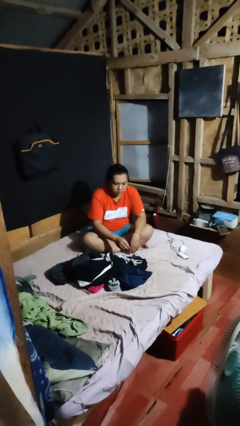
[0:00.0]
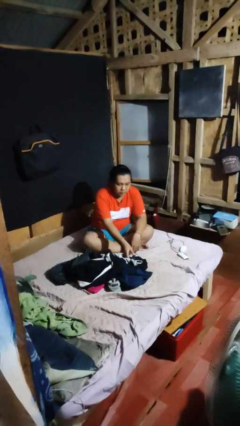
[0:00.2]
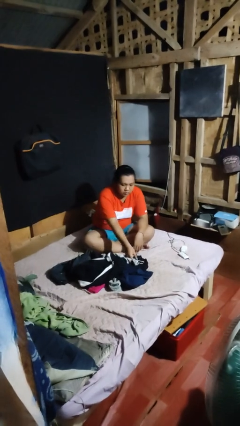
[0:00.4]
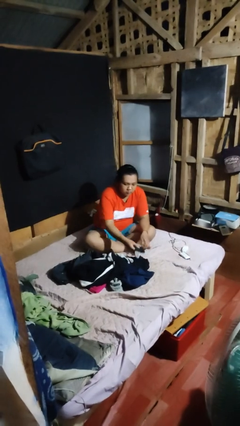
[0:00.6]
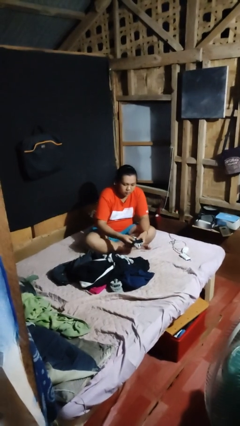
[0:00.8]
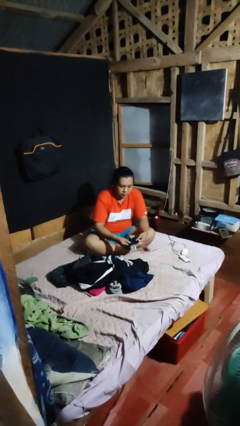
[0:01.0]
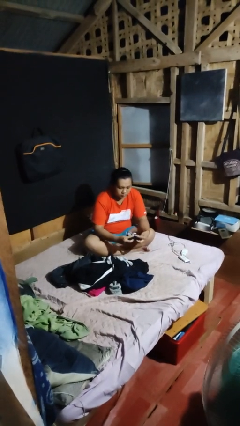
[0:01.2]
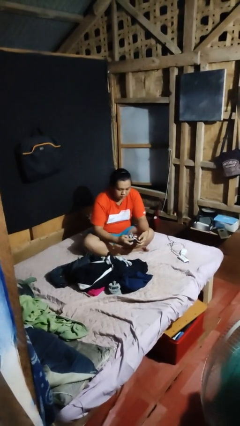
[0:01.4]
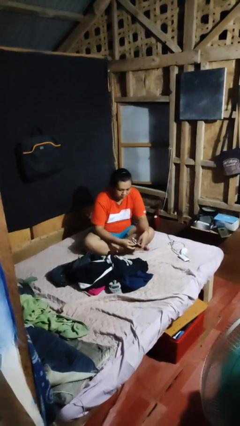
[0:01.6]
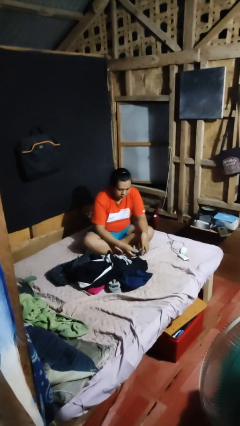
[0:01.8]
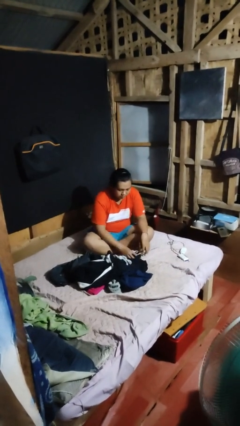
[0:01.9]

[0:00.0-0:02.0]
person folds socks

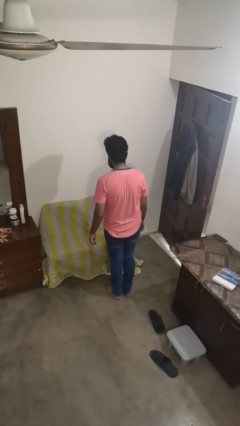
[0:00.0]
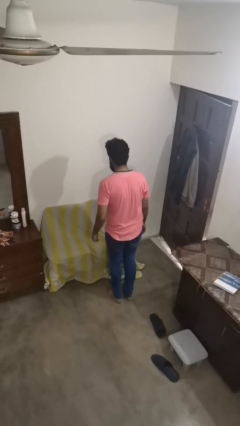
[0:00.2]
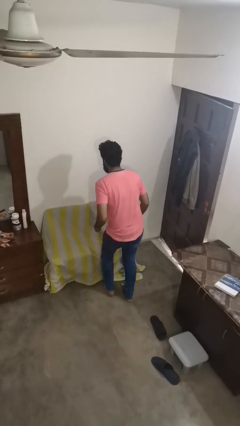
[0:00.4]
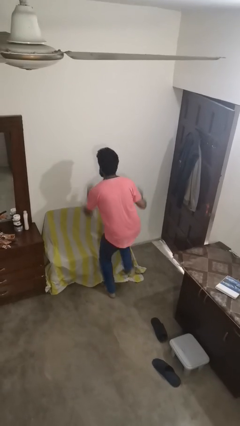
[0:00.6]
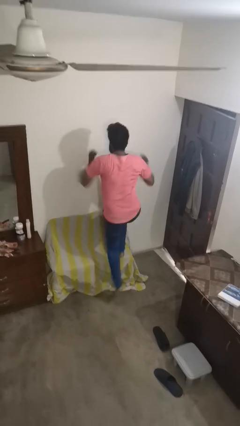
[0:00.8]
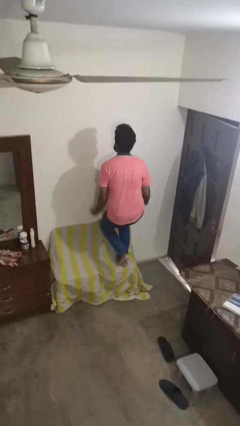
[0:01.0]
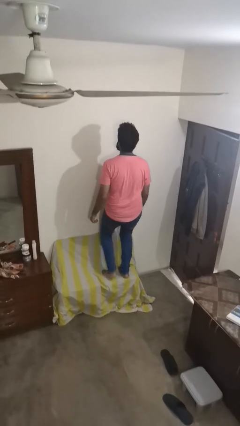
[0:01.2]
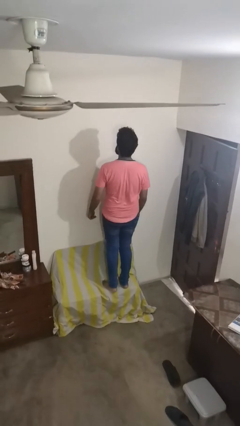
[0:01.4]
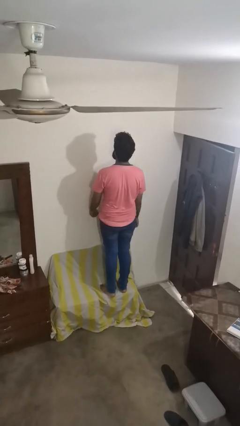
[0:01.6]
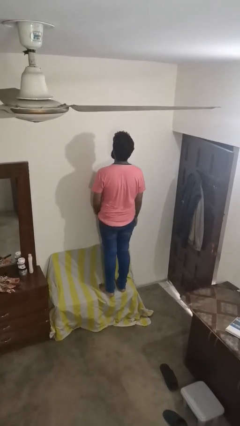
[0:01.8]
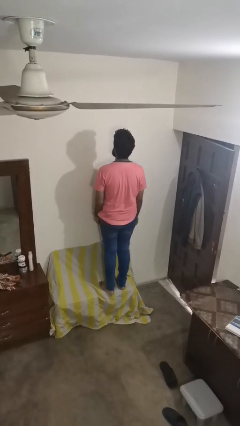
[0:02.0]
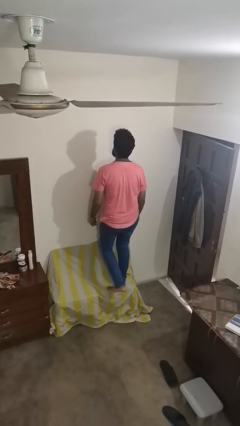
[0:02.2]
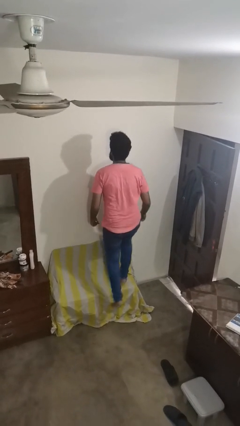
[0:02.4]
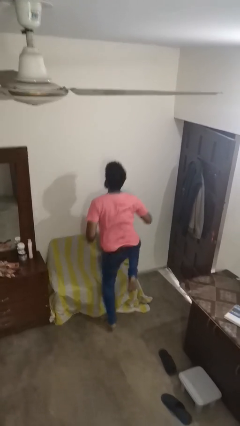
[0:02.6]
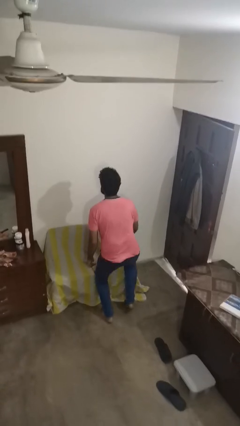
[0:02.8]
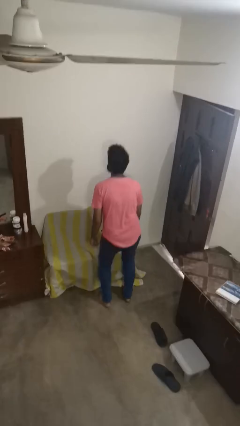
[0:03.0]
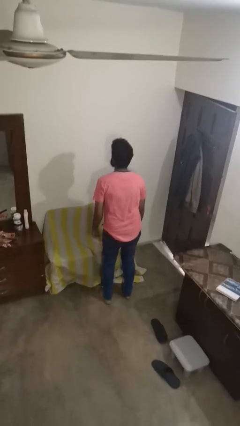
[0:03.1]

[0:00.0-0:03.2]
person jumps on couch

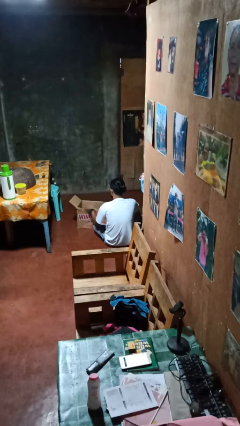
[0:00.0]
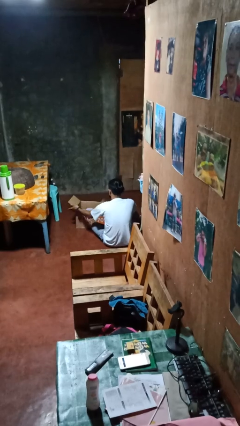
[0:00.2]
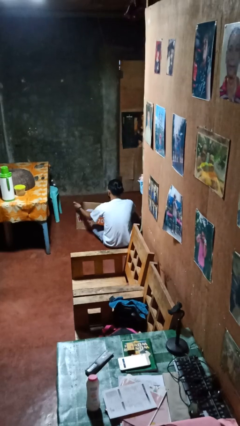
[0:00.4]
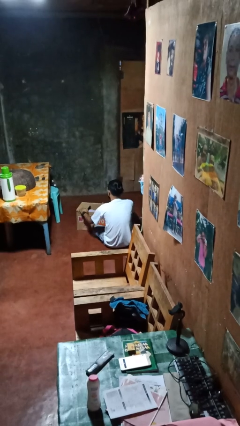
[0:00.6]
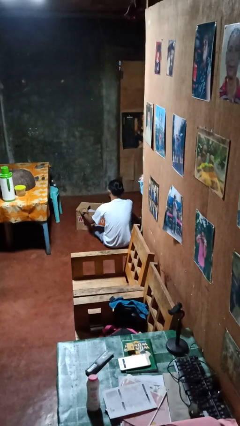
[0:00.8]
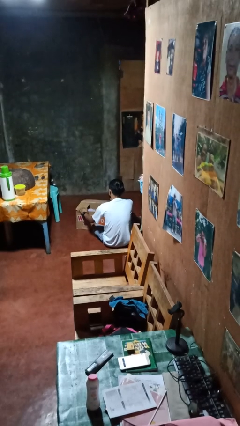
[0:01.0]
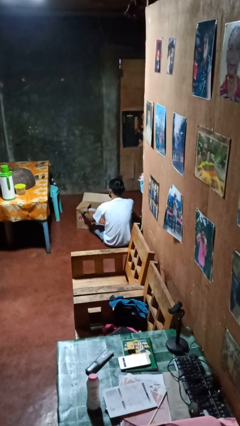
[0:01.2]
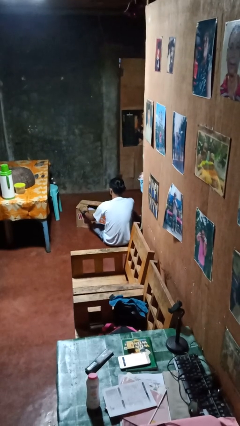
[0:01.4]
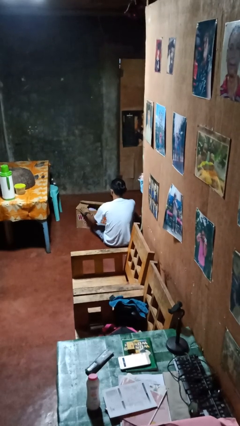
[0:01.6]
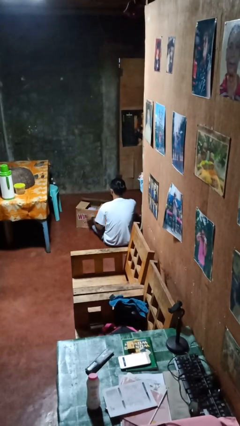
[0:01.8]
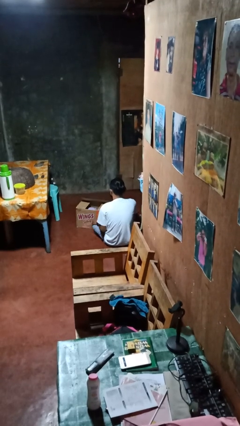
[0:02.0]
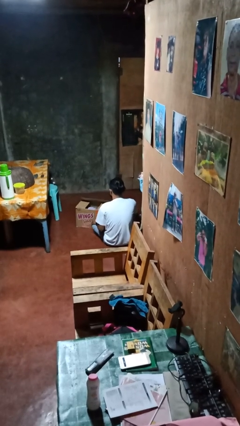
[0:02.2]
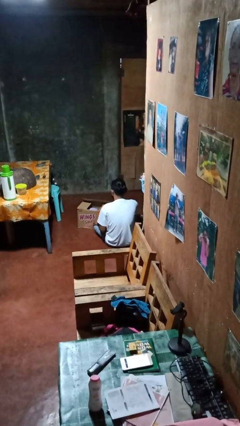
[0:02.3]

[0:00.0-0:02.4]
person closes box

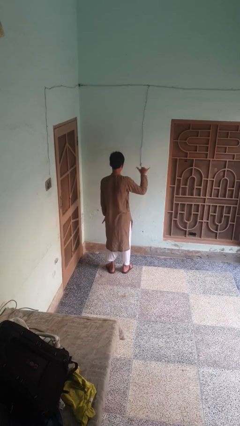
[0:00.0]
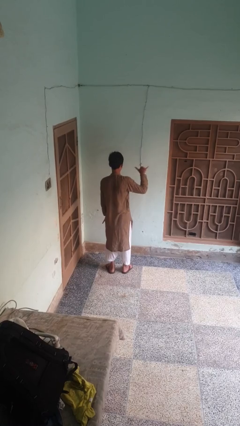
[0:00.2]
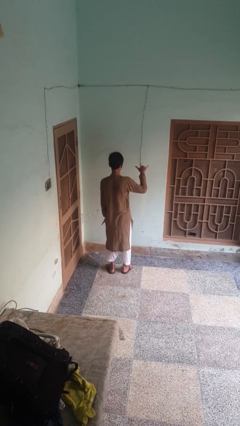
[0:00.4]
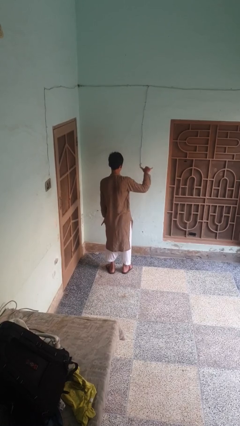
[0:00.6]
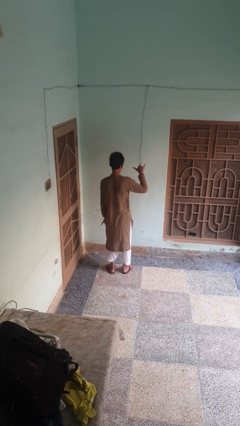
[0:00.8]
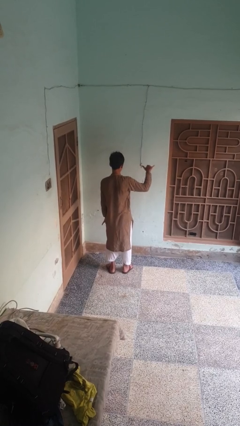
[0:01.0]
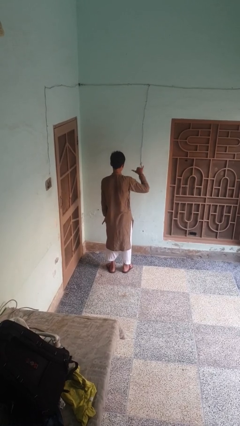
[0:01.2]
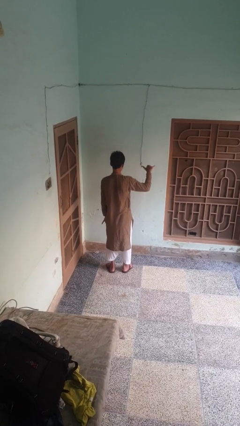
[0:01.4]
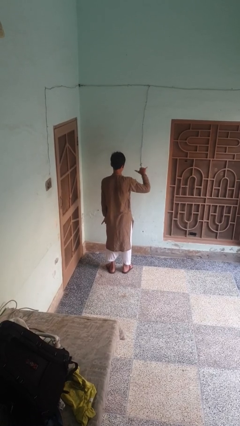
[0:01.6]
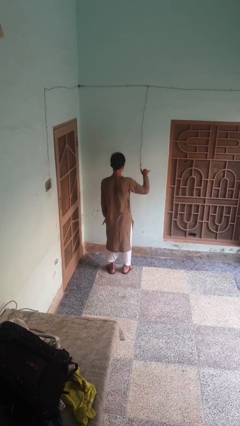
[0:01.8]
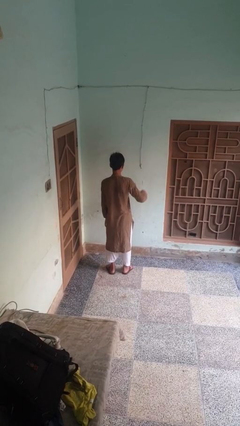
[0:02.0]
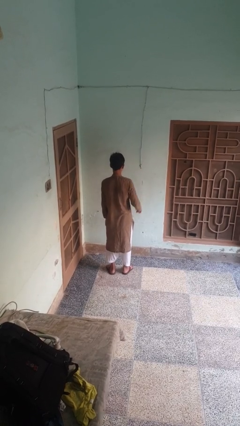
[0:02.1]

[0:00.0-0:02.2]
person gestures hang loose

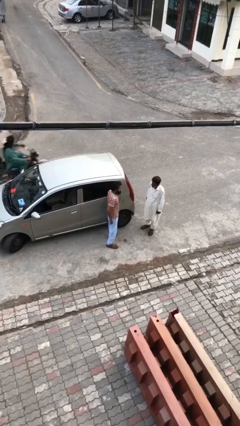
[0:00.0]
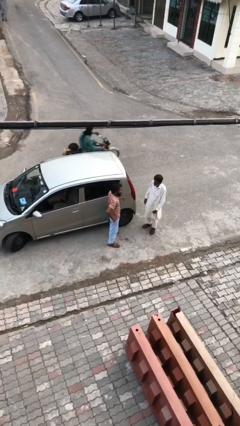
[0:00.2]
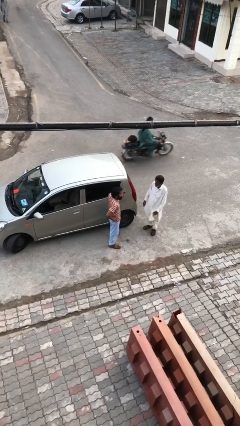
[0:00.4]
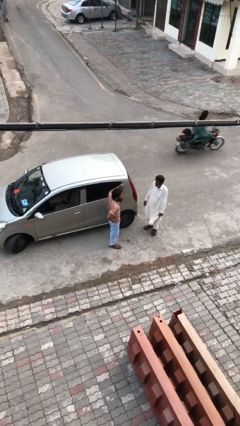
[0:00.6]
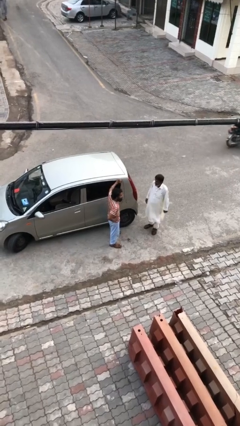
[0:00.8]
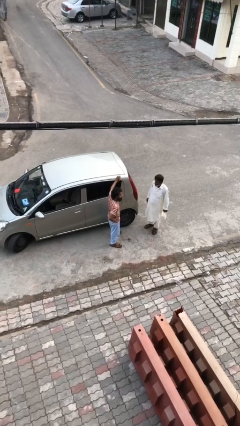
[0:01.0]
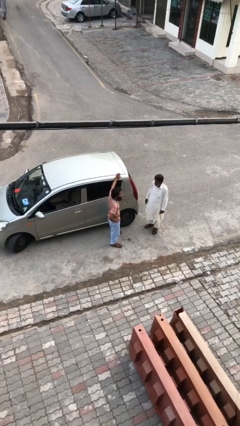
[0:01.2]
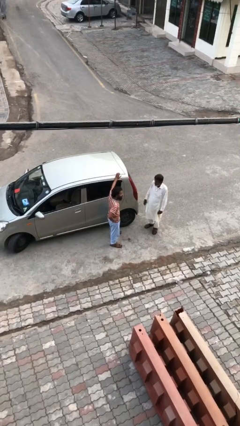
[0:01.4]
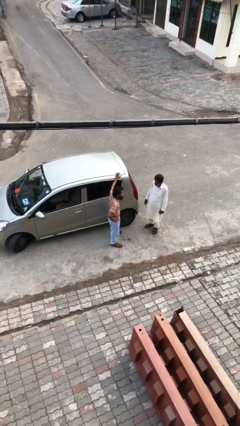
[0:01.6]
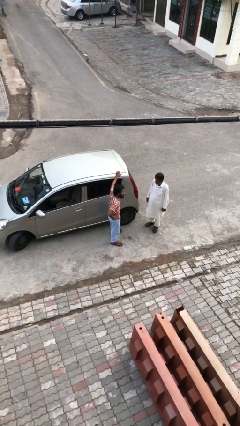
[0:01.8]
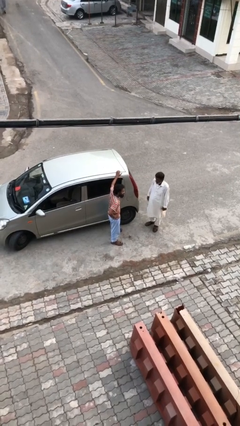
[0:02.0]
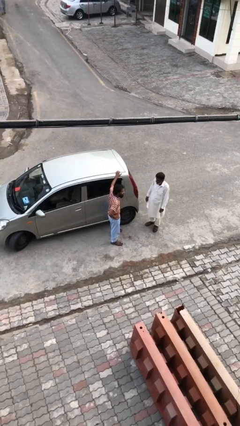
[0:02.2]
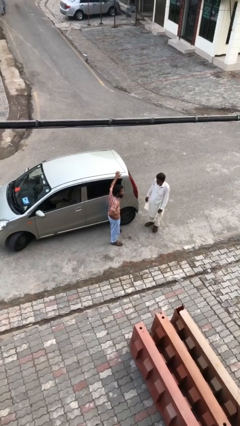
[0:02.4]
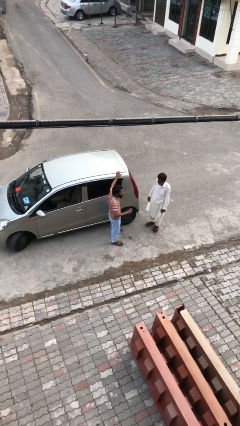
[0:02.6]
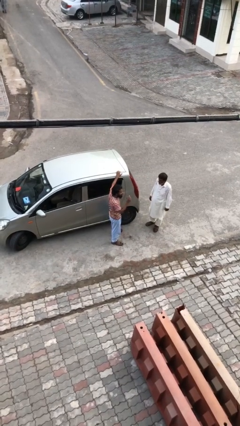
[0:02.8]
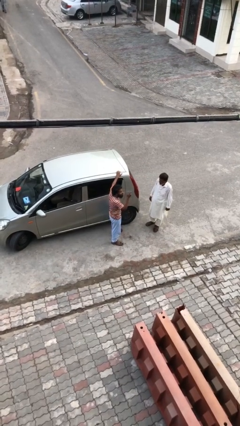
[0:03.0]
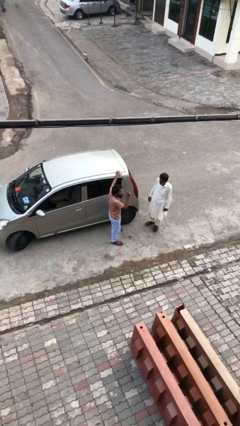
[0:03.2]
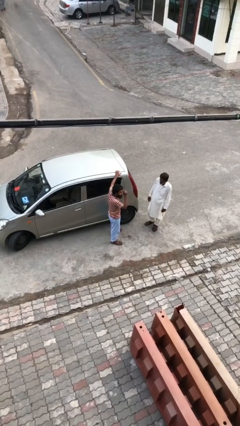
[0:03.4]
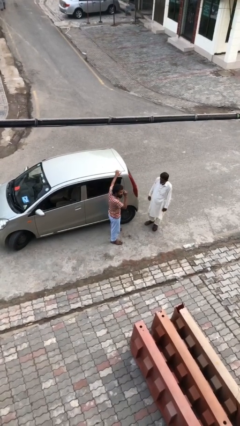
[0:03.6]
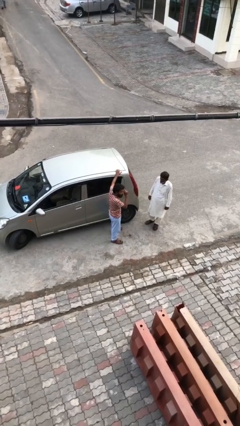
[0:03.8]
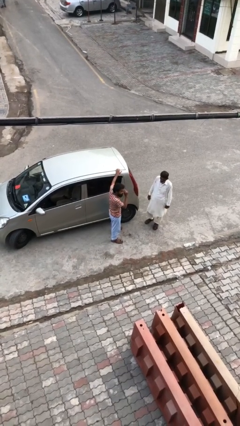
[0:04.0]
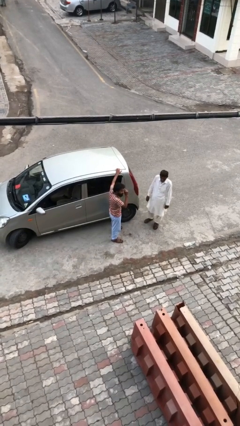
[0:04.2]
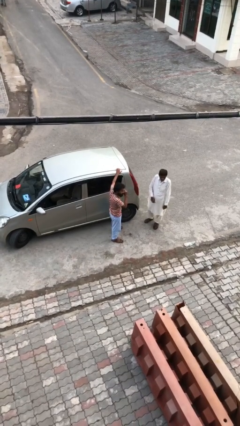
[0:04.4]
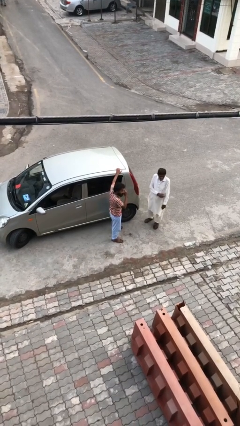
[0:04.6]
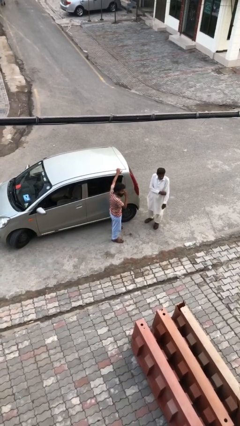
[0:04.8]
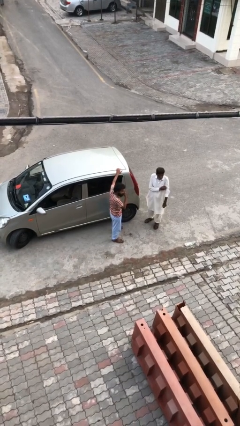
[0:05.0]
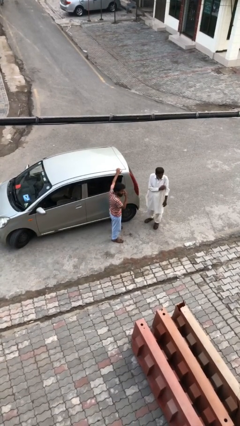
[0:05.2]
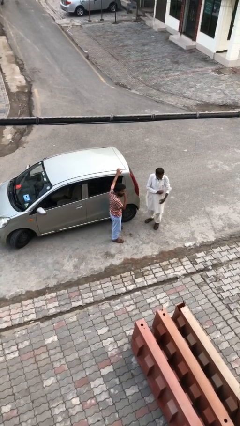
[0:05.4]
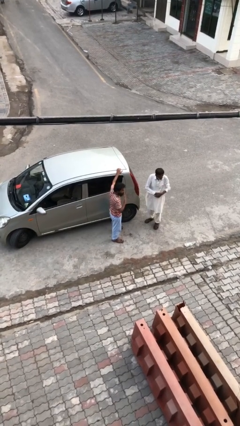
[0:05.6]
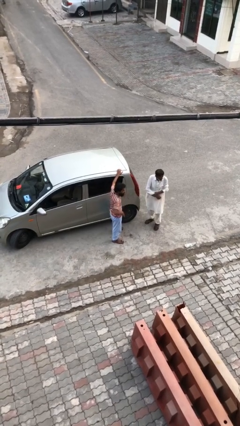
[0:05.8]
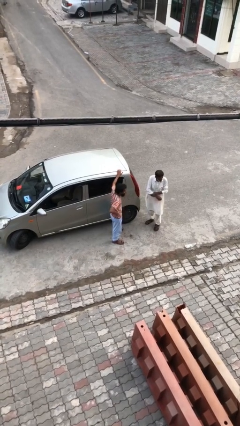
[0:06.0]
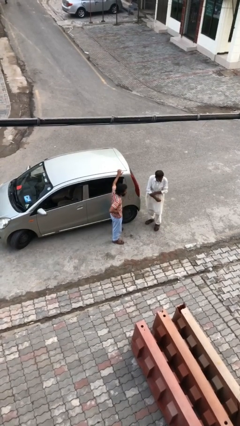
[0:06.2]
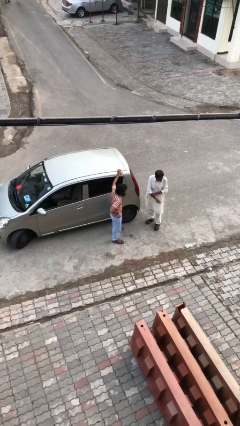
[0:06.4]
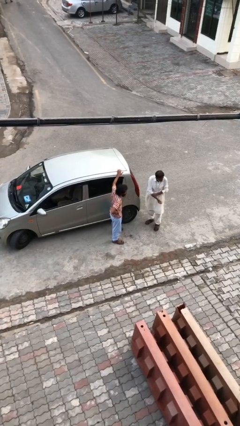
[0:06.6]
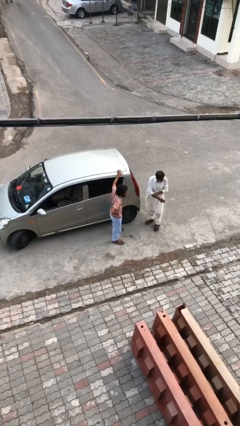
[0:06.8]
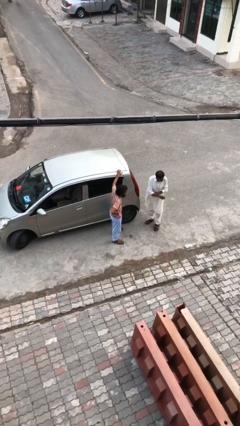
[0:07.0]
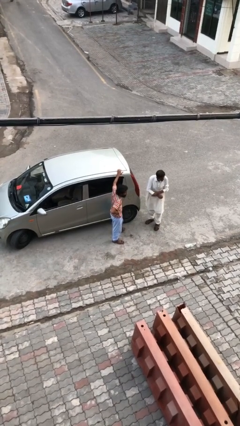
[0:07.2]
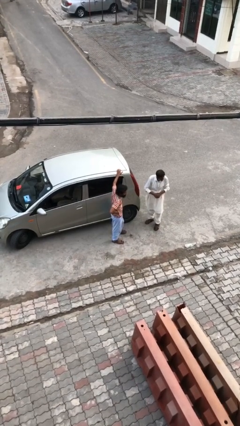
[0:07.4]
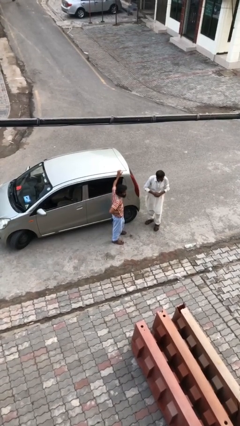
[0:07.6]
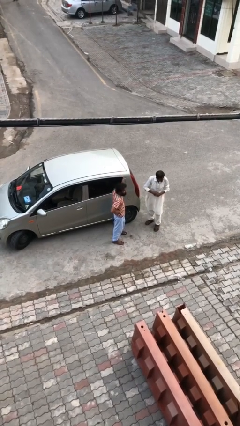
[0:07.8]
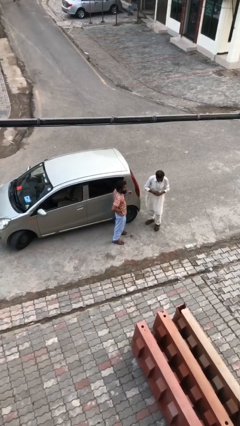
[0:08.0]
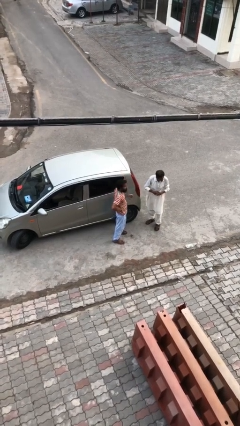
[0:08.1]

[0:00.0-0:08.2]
person talks to person
